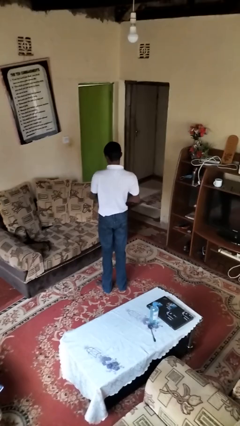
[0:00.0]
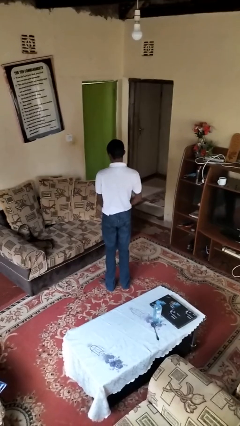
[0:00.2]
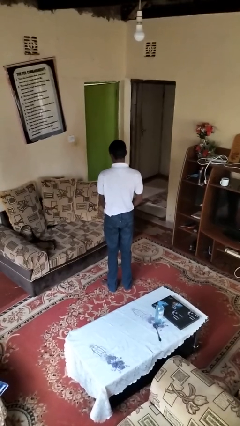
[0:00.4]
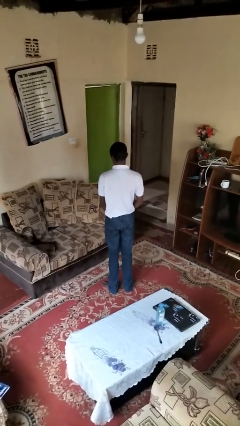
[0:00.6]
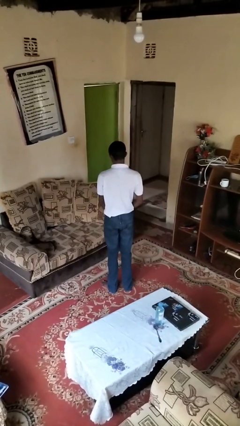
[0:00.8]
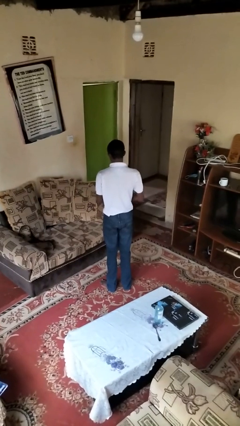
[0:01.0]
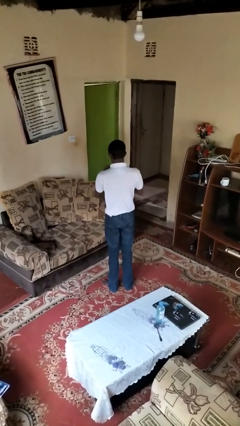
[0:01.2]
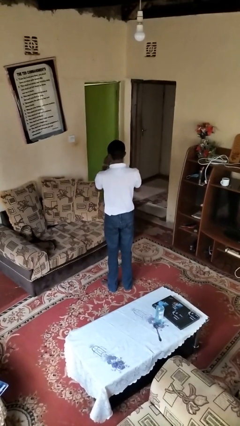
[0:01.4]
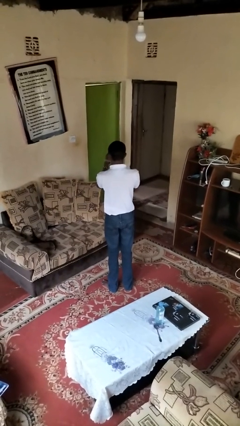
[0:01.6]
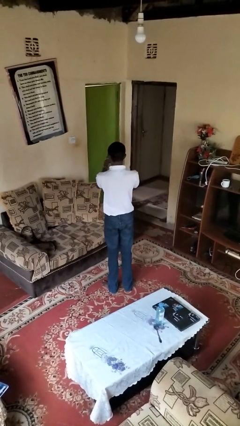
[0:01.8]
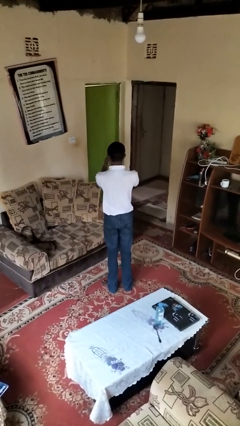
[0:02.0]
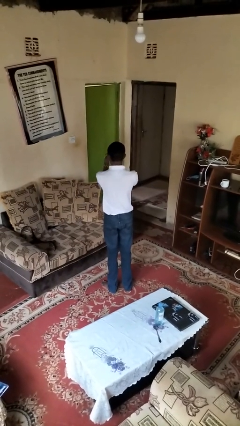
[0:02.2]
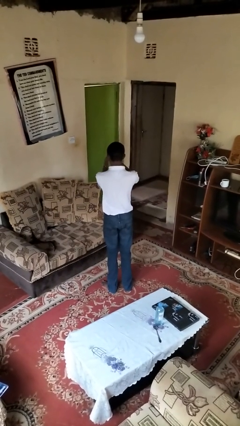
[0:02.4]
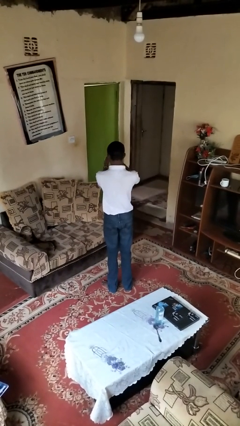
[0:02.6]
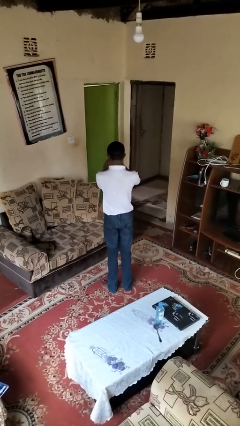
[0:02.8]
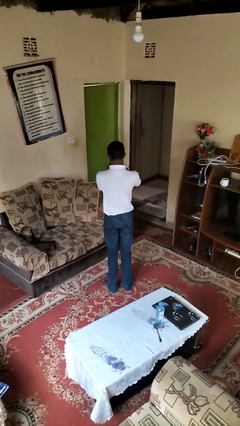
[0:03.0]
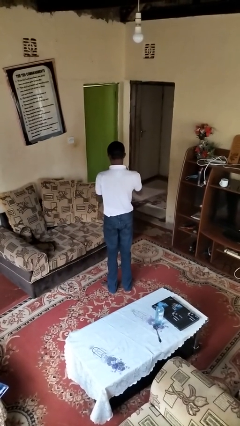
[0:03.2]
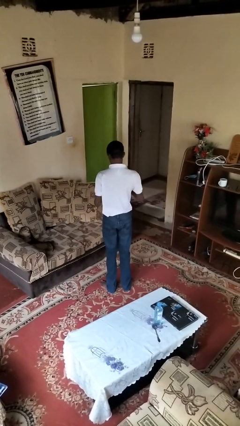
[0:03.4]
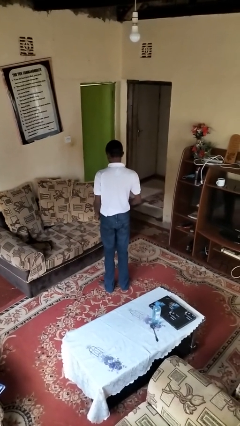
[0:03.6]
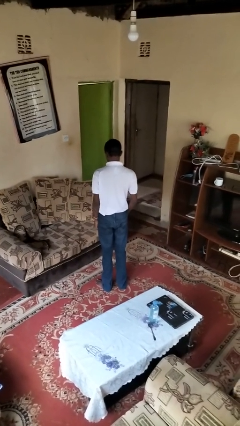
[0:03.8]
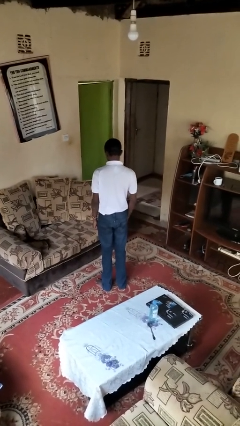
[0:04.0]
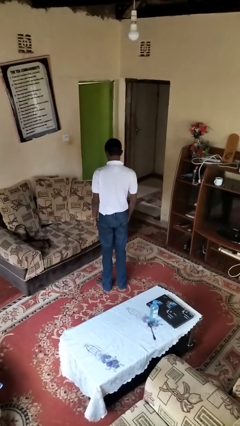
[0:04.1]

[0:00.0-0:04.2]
person takes off wristwatch

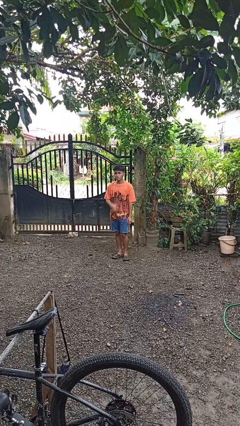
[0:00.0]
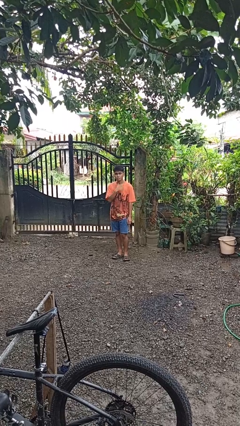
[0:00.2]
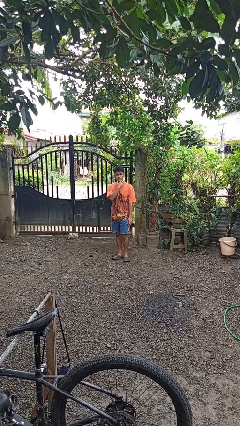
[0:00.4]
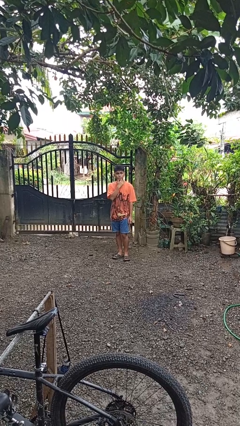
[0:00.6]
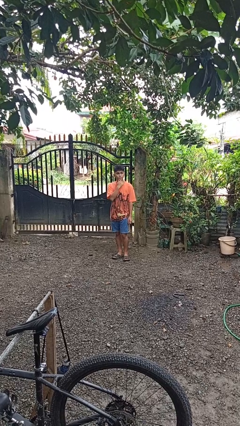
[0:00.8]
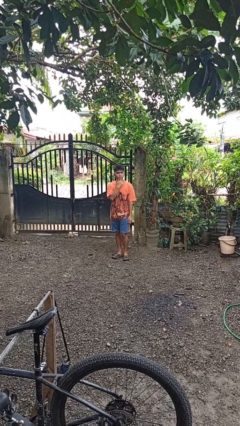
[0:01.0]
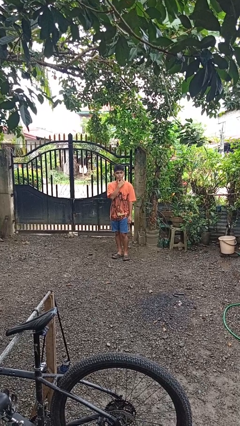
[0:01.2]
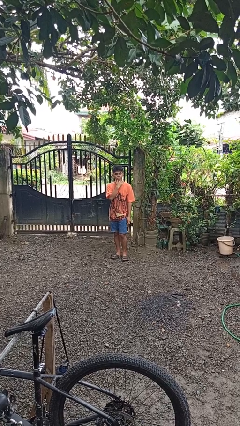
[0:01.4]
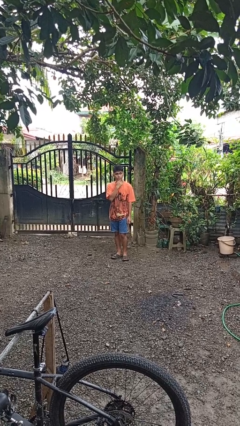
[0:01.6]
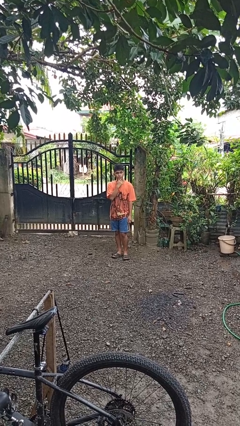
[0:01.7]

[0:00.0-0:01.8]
person strokes chin

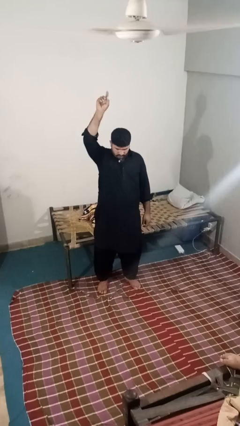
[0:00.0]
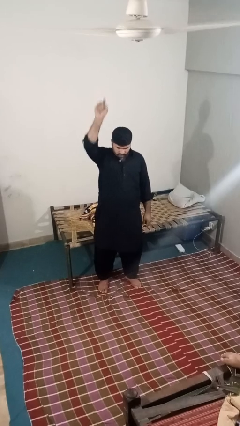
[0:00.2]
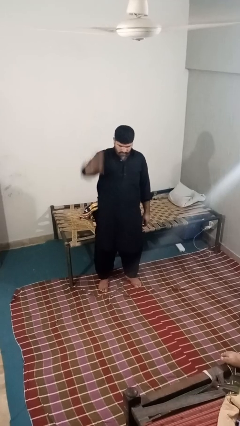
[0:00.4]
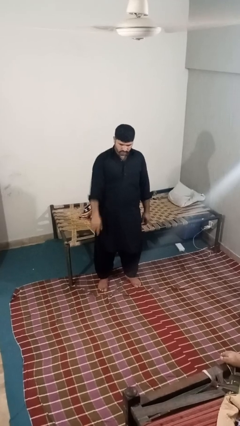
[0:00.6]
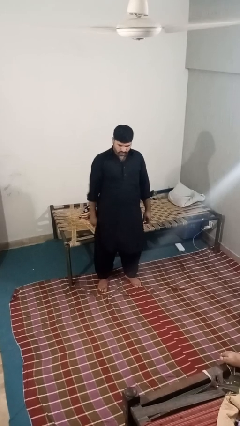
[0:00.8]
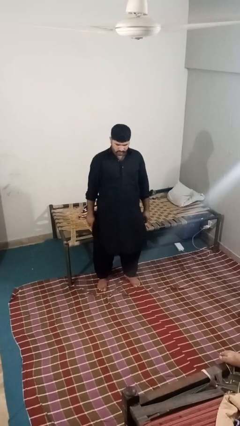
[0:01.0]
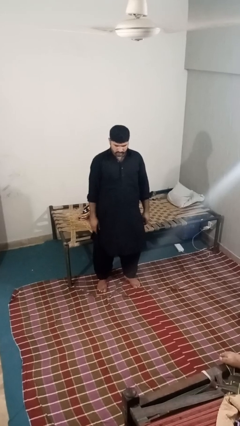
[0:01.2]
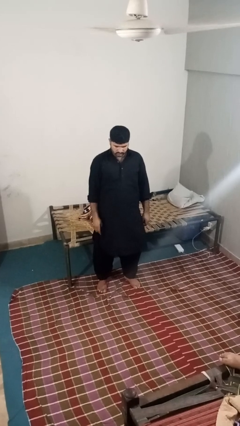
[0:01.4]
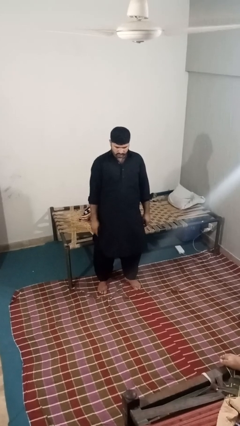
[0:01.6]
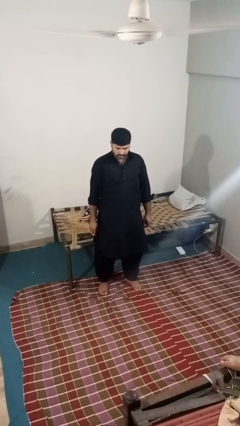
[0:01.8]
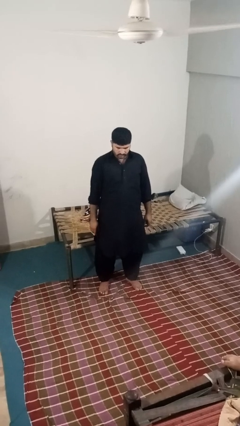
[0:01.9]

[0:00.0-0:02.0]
person gestures swipe down

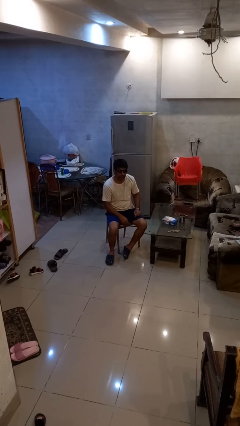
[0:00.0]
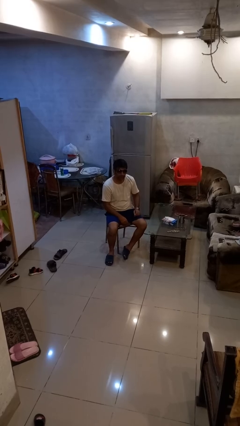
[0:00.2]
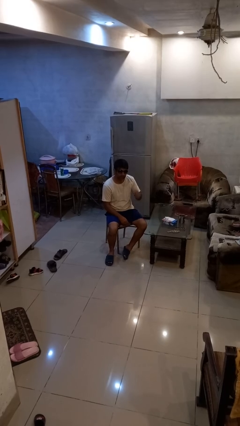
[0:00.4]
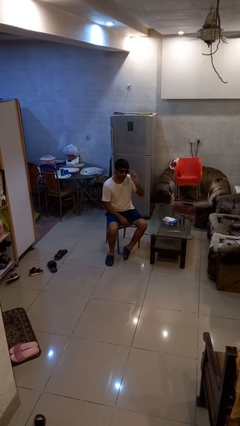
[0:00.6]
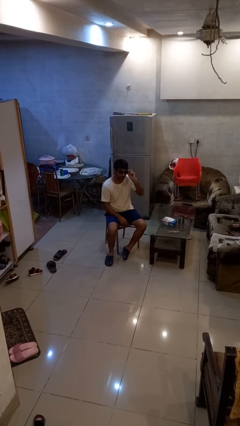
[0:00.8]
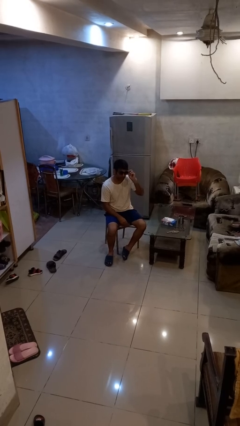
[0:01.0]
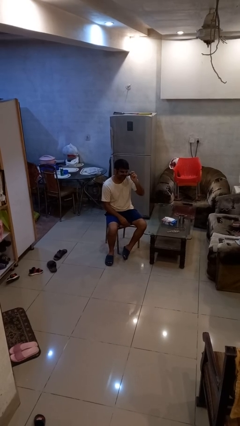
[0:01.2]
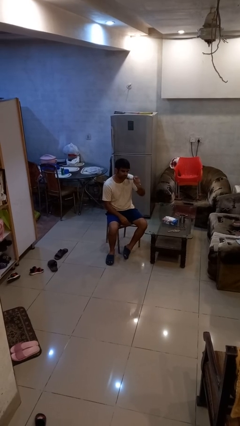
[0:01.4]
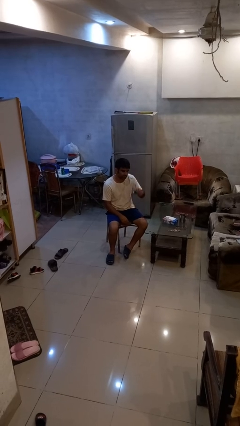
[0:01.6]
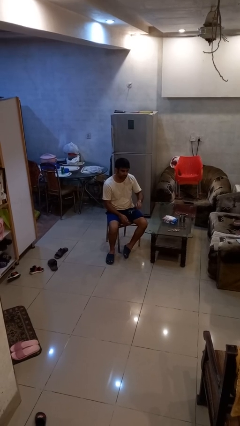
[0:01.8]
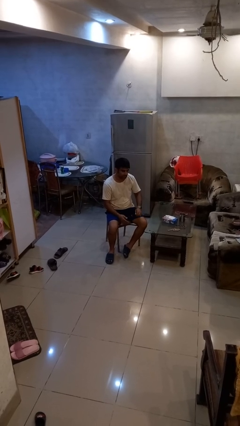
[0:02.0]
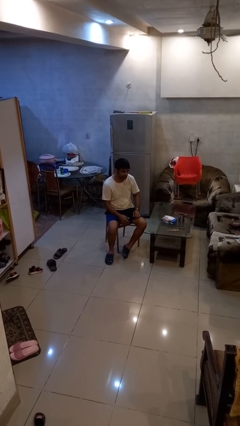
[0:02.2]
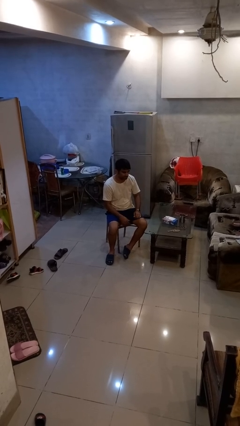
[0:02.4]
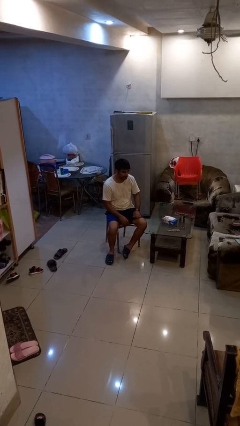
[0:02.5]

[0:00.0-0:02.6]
person takes off sunglasses

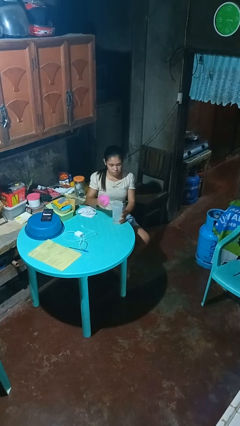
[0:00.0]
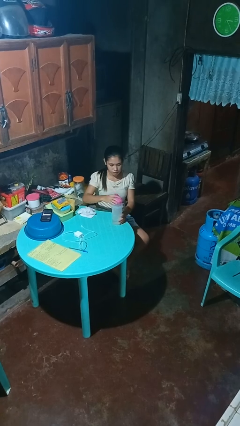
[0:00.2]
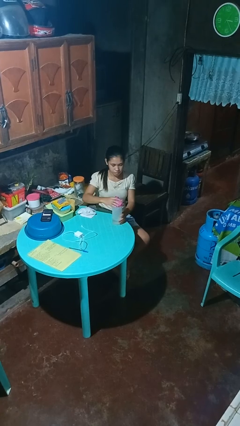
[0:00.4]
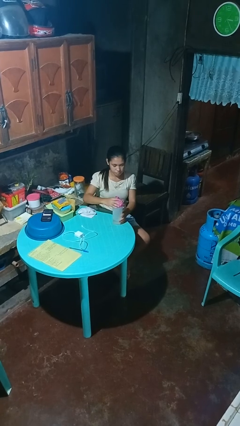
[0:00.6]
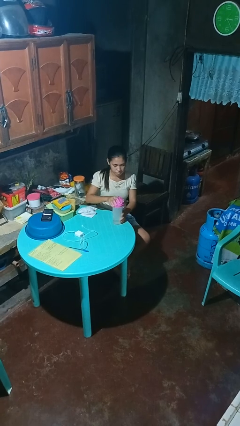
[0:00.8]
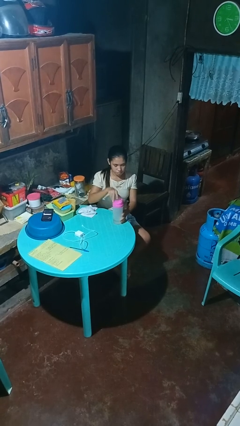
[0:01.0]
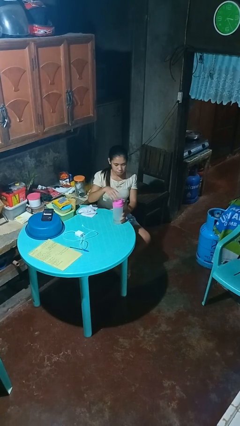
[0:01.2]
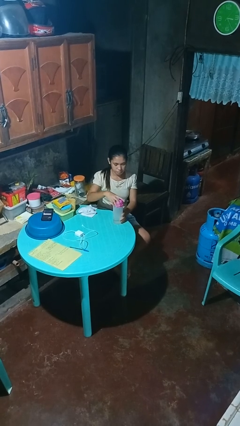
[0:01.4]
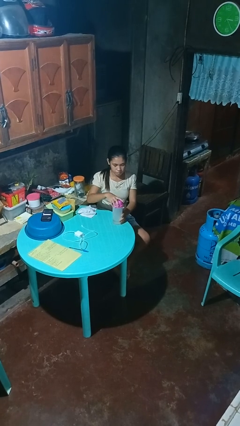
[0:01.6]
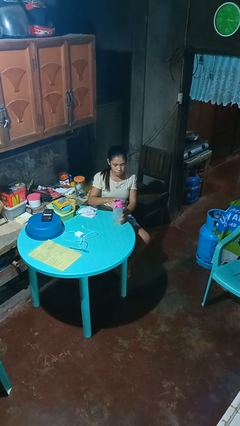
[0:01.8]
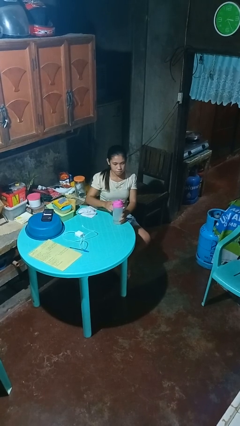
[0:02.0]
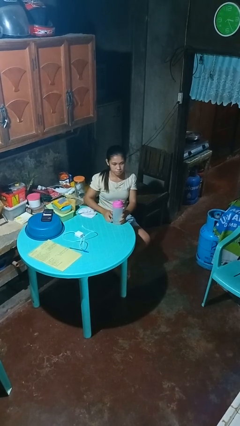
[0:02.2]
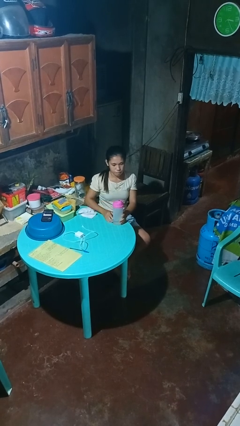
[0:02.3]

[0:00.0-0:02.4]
person screws lid to bottle

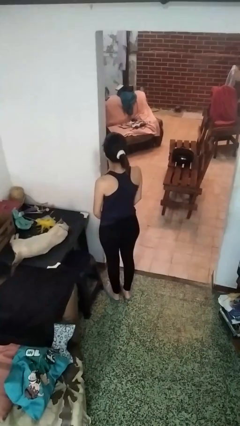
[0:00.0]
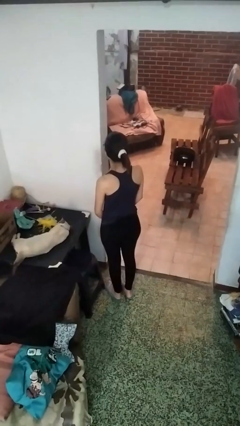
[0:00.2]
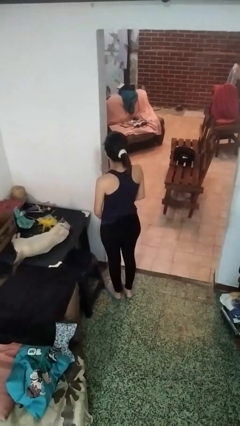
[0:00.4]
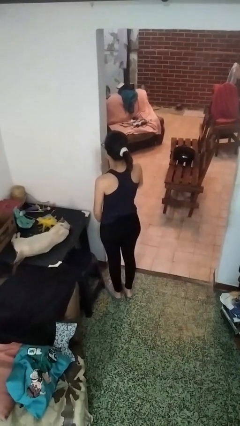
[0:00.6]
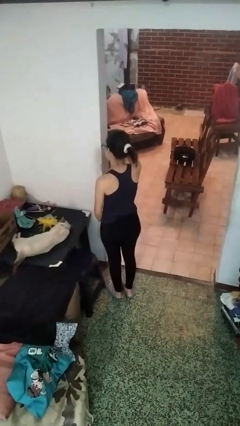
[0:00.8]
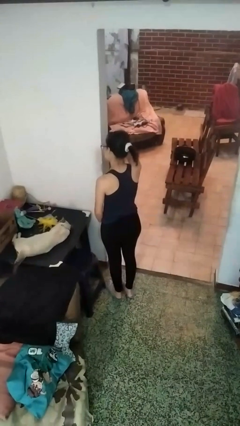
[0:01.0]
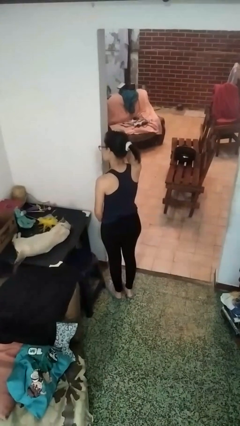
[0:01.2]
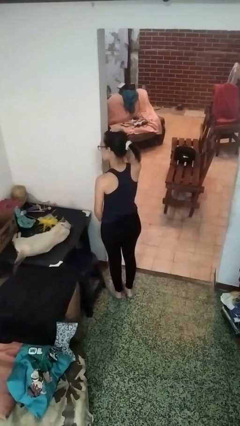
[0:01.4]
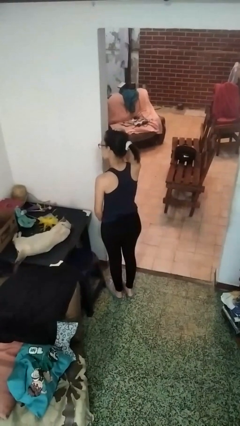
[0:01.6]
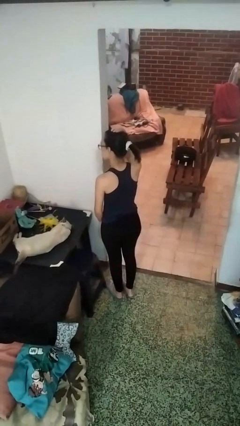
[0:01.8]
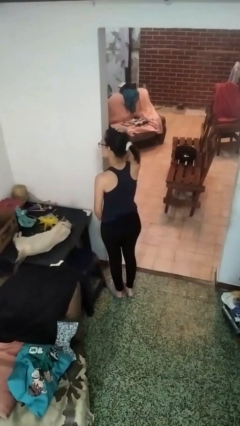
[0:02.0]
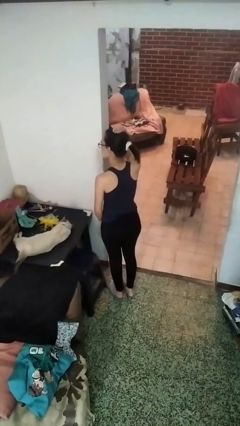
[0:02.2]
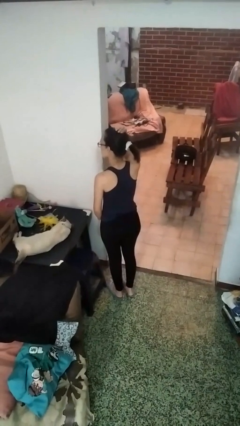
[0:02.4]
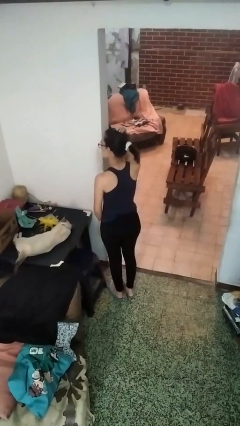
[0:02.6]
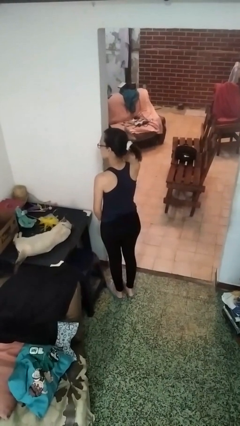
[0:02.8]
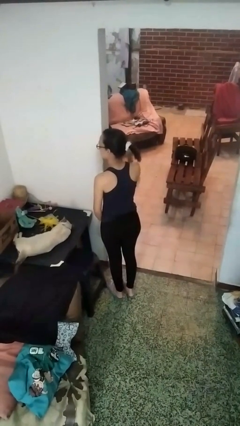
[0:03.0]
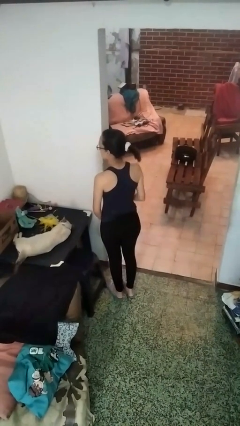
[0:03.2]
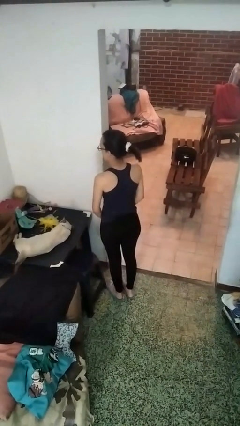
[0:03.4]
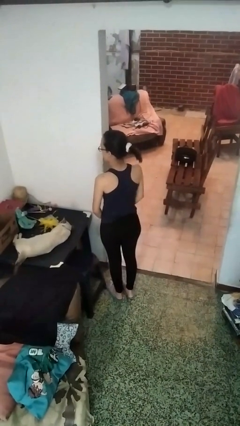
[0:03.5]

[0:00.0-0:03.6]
person pats head

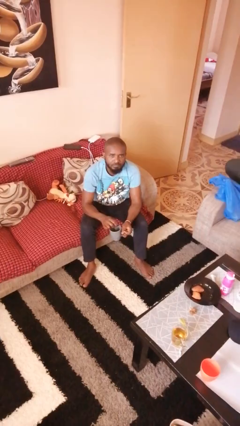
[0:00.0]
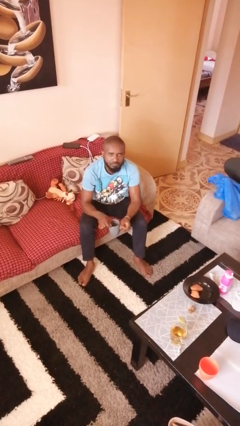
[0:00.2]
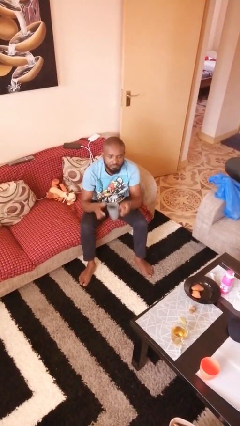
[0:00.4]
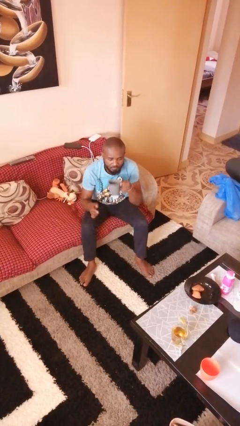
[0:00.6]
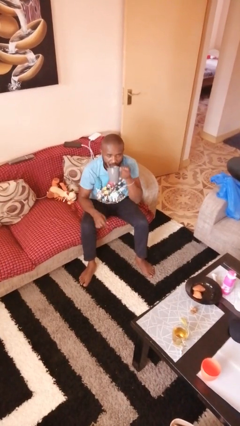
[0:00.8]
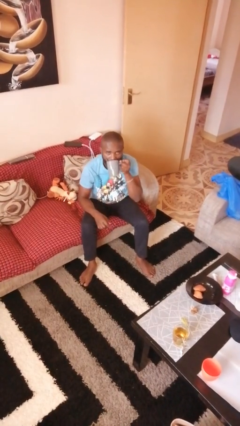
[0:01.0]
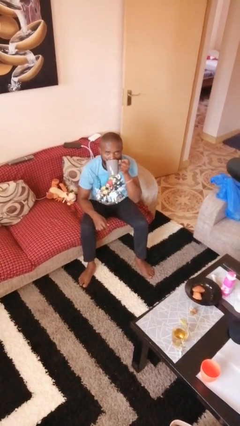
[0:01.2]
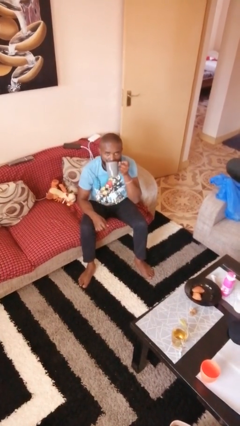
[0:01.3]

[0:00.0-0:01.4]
person drinks from mug
